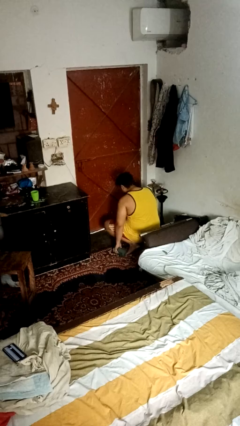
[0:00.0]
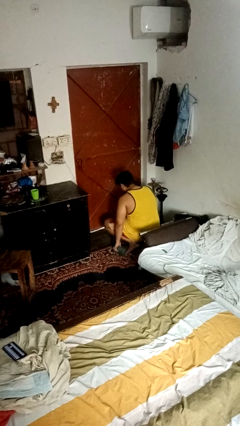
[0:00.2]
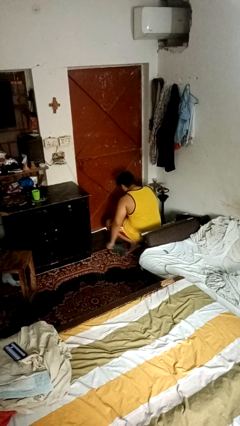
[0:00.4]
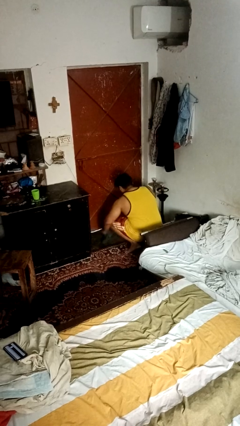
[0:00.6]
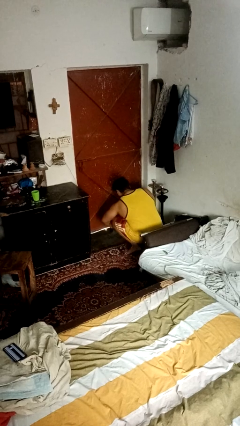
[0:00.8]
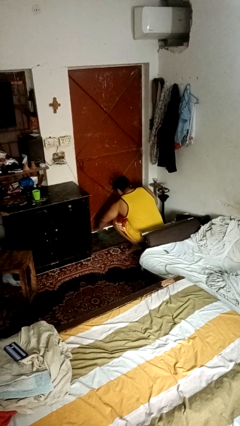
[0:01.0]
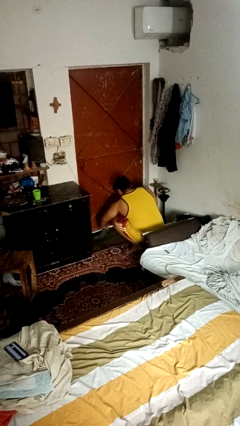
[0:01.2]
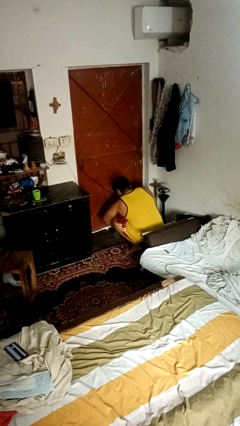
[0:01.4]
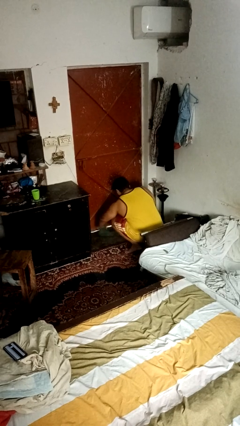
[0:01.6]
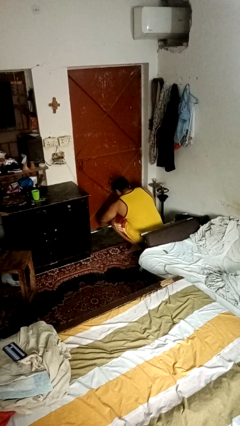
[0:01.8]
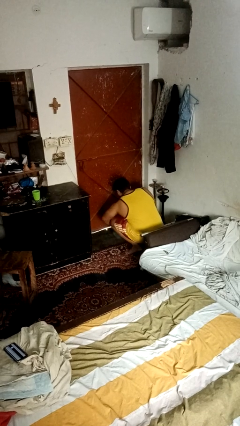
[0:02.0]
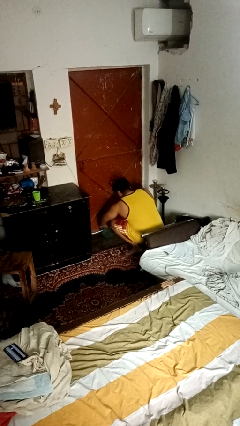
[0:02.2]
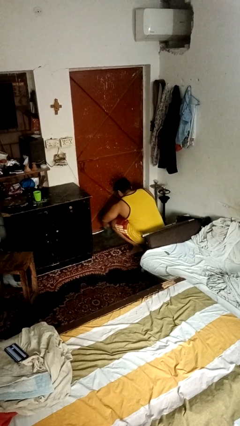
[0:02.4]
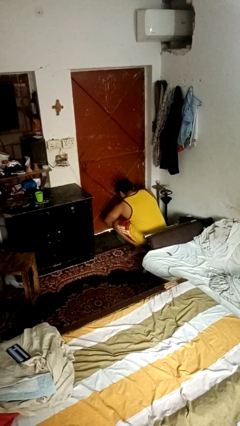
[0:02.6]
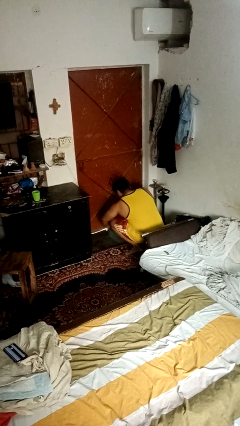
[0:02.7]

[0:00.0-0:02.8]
person mops

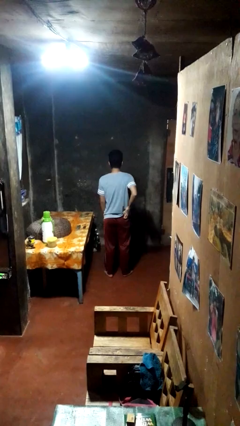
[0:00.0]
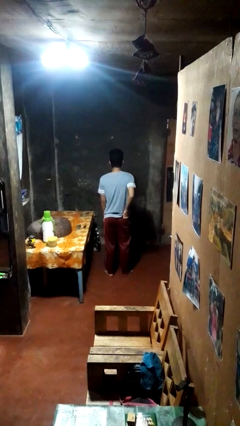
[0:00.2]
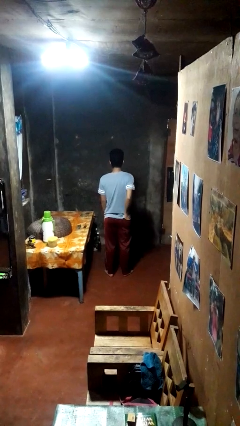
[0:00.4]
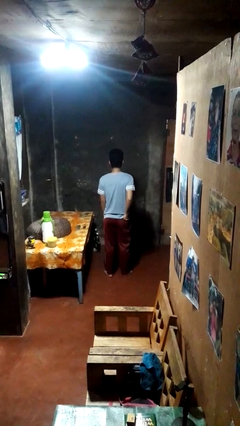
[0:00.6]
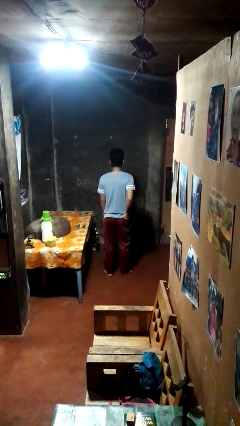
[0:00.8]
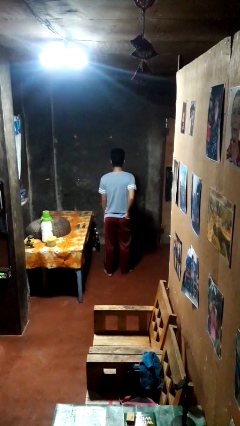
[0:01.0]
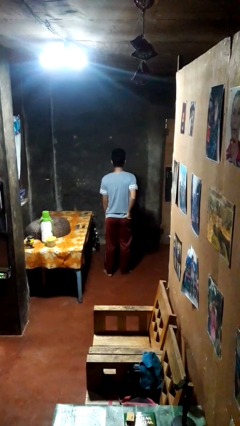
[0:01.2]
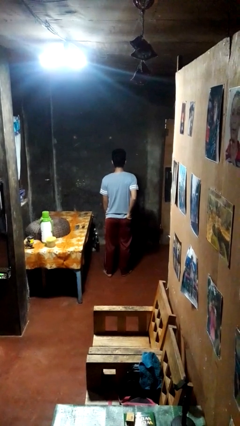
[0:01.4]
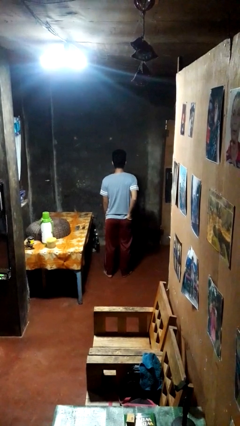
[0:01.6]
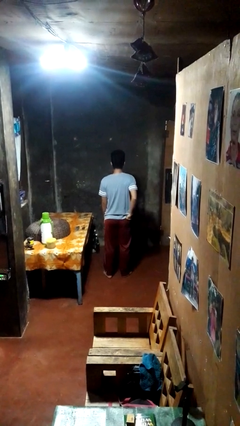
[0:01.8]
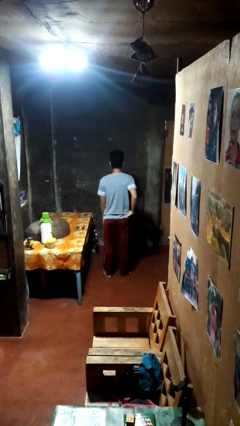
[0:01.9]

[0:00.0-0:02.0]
person puts hands in back pockets

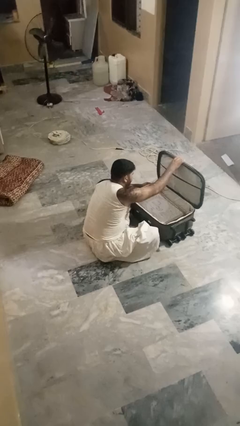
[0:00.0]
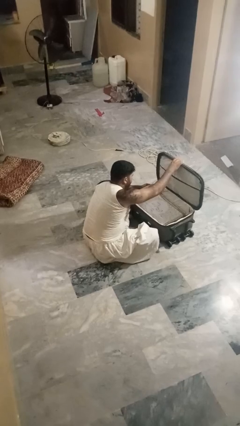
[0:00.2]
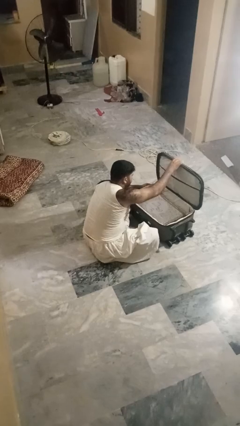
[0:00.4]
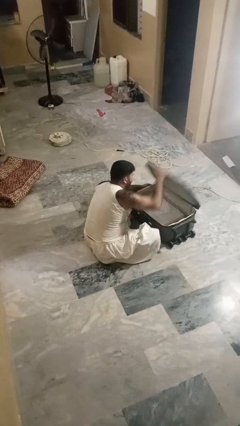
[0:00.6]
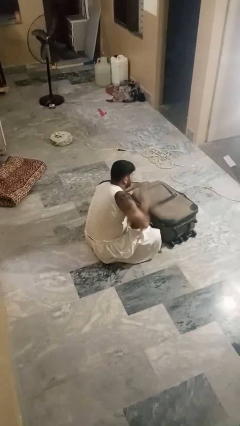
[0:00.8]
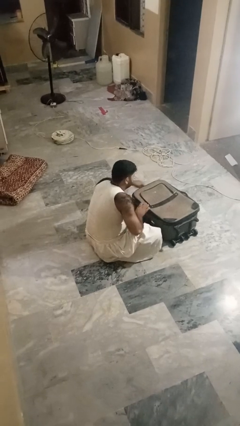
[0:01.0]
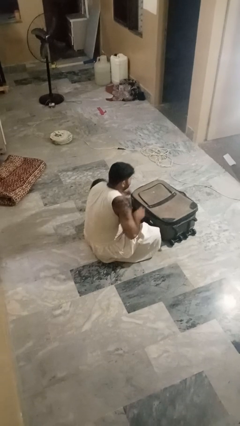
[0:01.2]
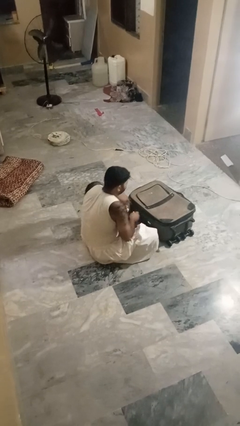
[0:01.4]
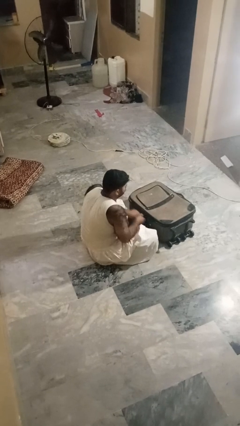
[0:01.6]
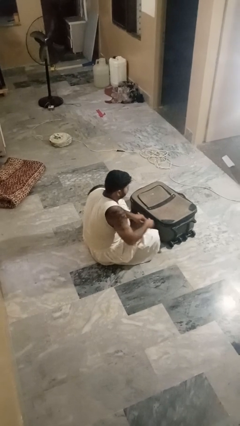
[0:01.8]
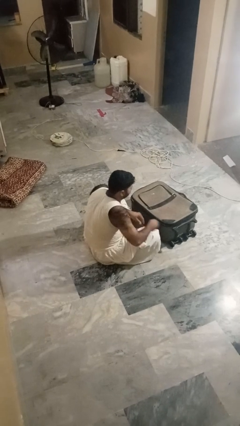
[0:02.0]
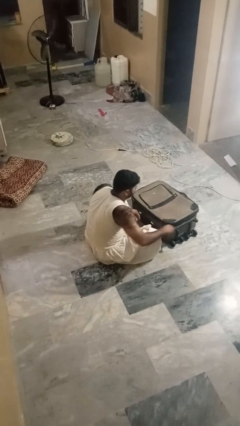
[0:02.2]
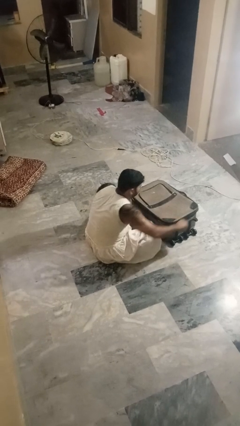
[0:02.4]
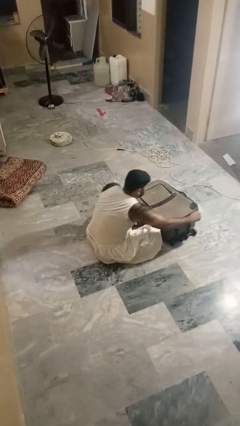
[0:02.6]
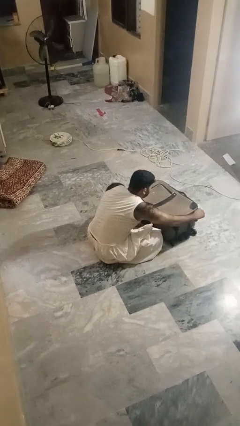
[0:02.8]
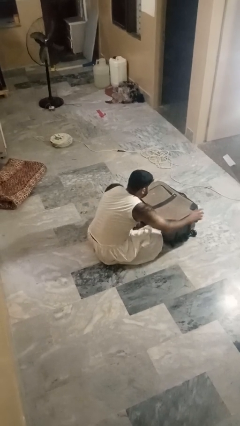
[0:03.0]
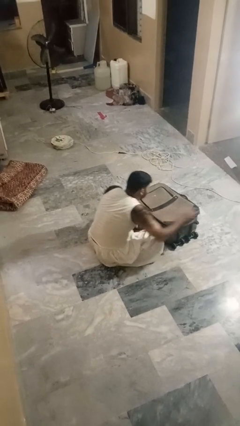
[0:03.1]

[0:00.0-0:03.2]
person closes suitcase

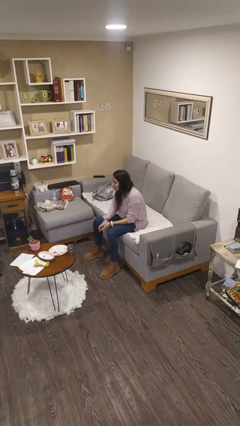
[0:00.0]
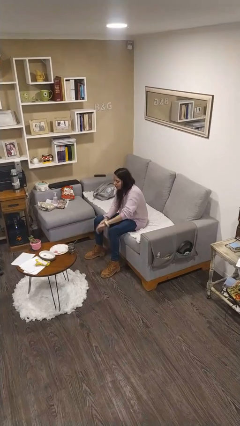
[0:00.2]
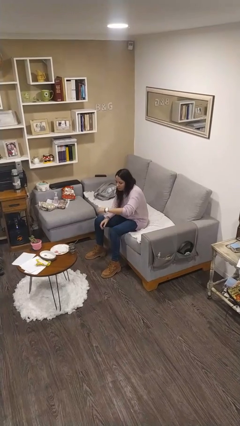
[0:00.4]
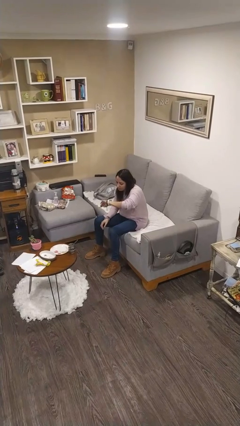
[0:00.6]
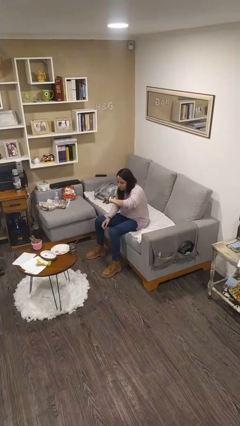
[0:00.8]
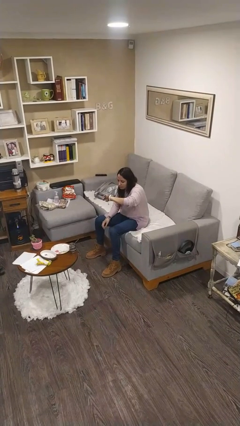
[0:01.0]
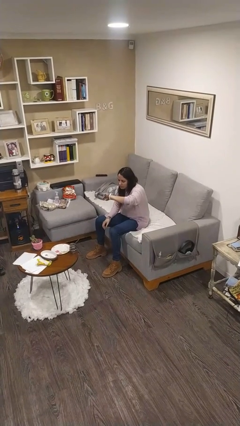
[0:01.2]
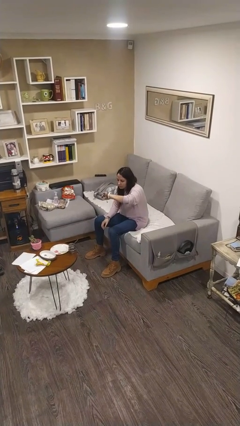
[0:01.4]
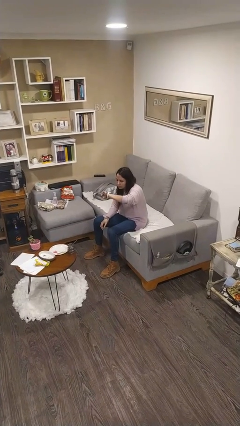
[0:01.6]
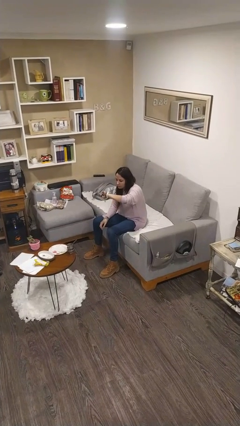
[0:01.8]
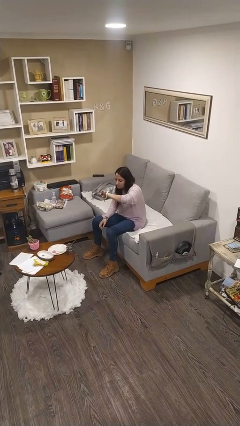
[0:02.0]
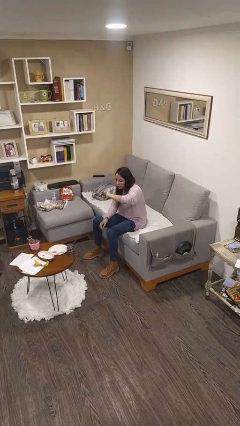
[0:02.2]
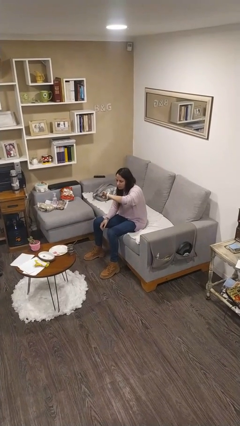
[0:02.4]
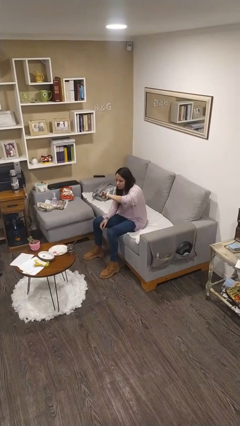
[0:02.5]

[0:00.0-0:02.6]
person looks at wristwatch

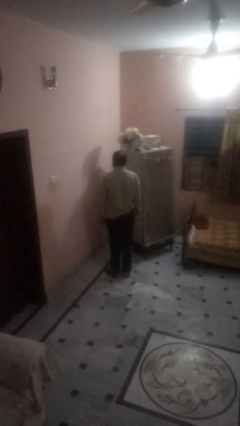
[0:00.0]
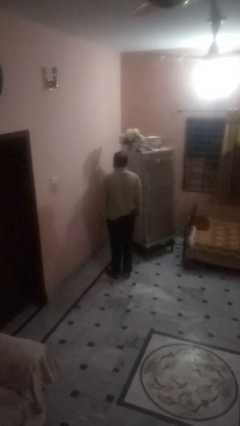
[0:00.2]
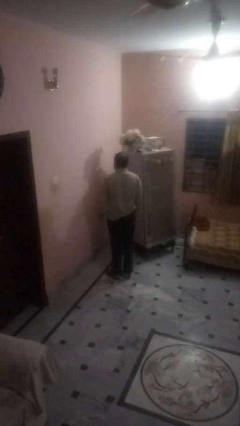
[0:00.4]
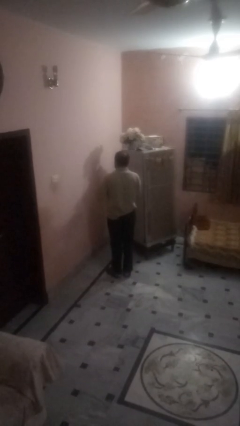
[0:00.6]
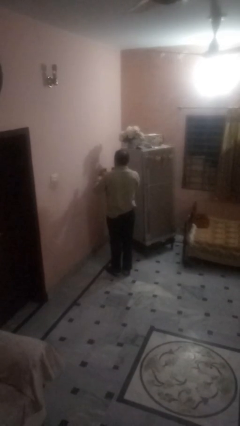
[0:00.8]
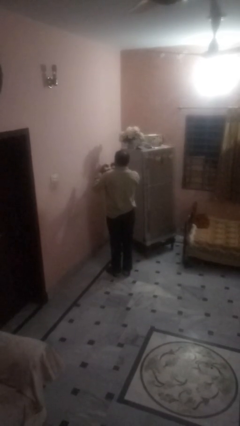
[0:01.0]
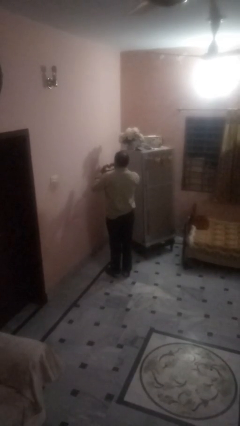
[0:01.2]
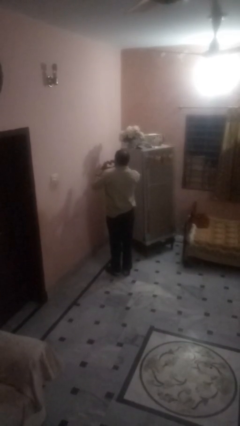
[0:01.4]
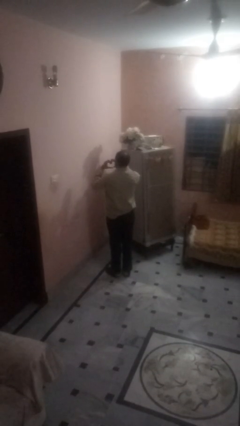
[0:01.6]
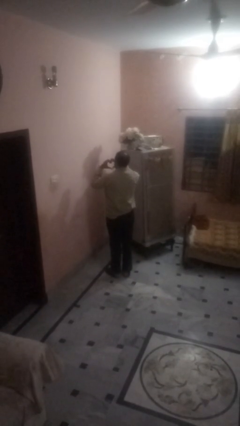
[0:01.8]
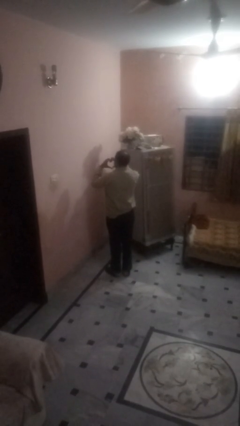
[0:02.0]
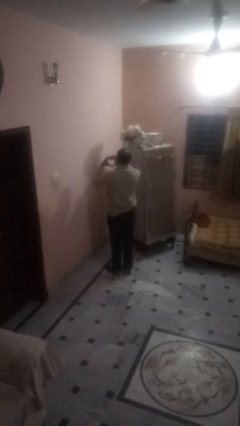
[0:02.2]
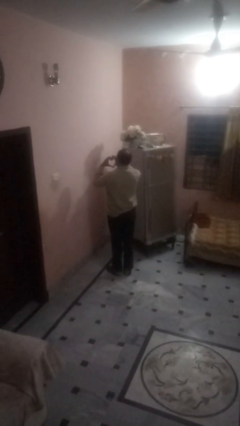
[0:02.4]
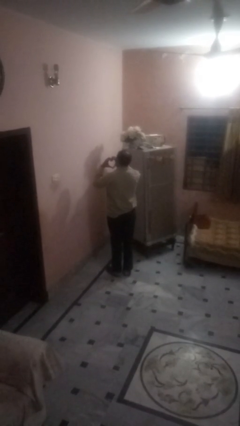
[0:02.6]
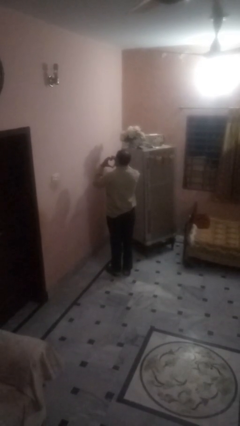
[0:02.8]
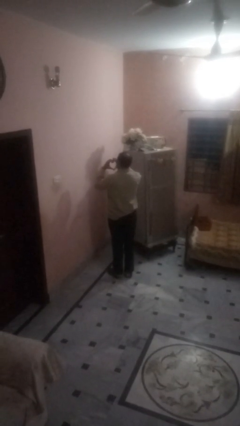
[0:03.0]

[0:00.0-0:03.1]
person gestures heart

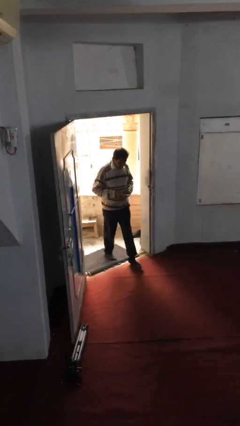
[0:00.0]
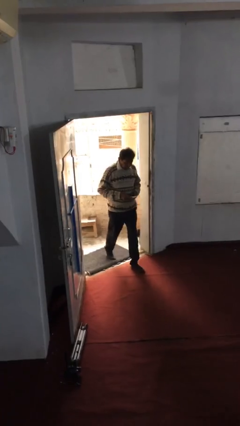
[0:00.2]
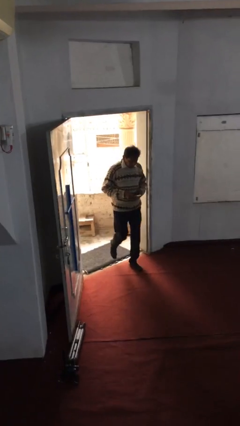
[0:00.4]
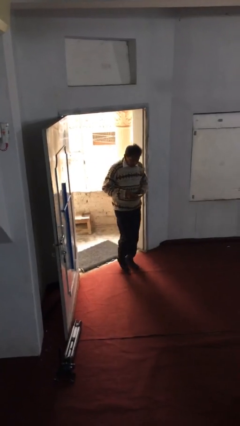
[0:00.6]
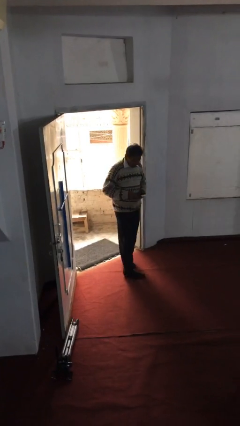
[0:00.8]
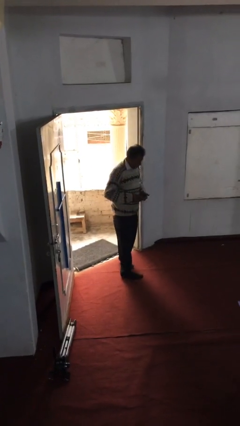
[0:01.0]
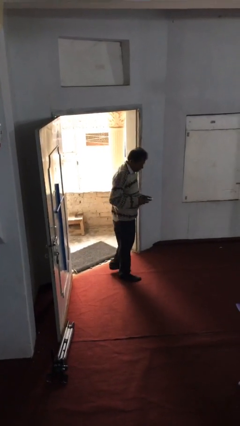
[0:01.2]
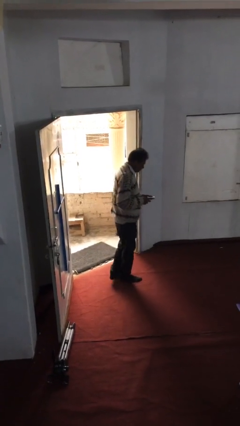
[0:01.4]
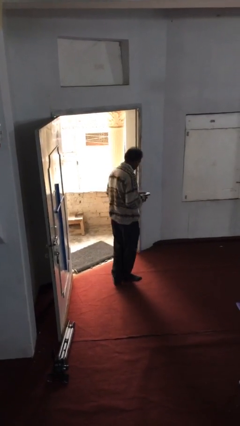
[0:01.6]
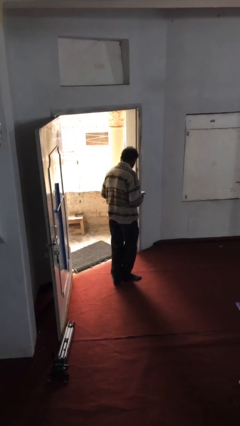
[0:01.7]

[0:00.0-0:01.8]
person enters scene through structure

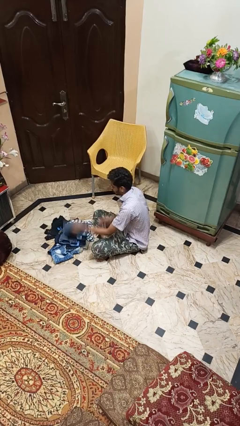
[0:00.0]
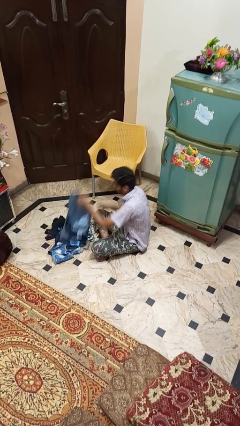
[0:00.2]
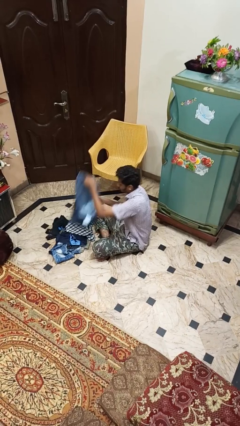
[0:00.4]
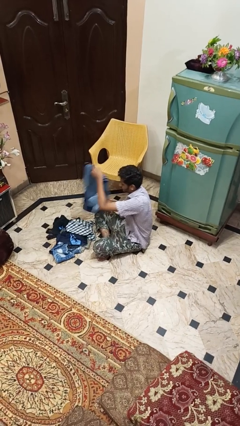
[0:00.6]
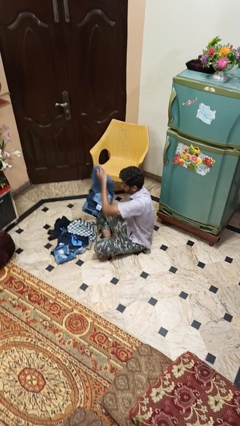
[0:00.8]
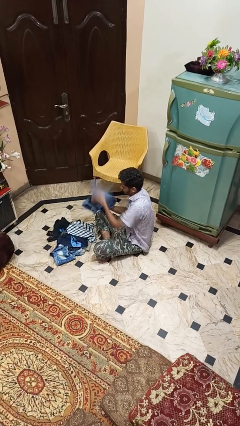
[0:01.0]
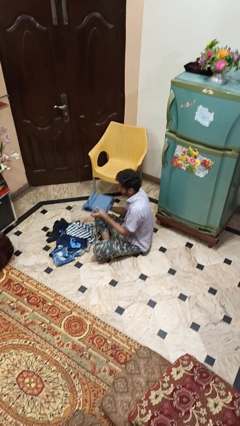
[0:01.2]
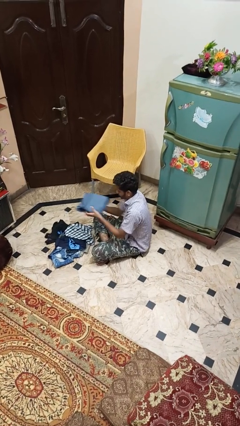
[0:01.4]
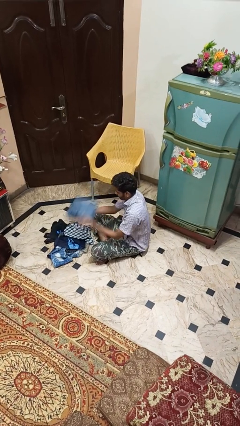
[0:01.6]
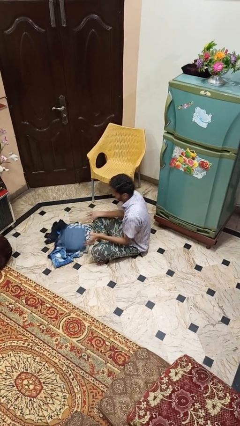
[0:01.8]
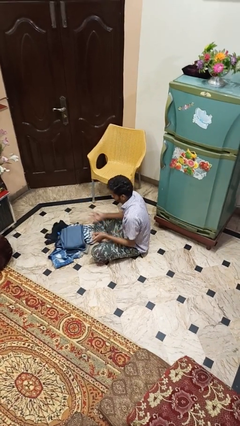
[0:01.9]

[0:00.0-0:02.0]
person folds pants
